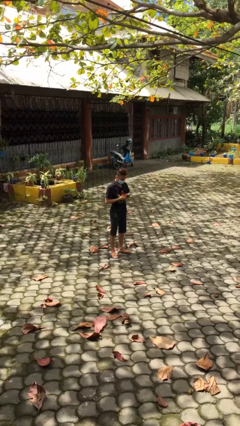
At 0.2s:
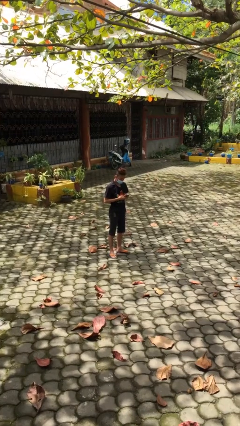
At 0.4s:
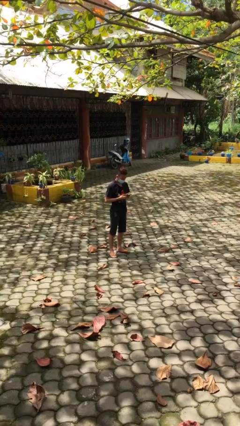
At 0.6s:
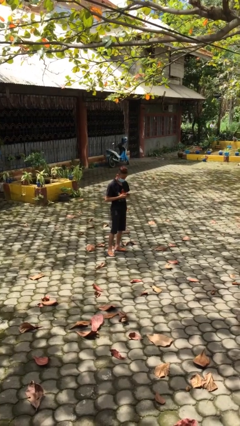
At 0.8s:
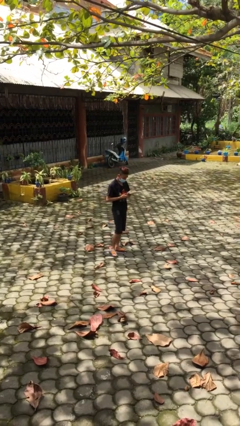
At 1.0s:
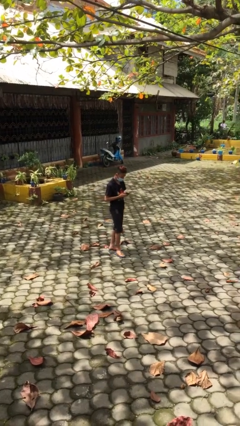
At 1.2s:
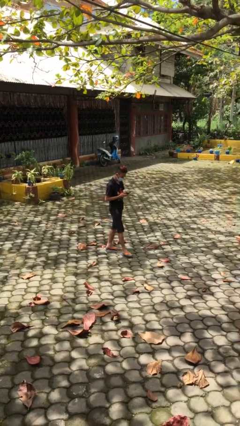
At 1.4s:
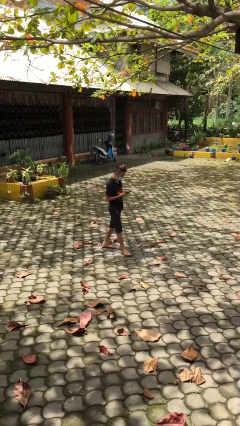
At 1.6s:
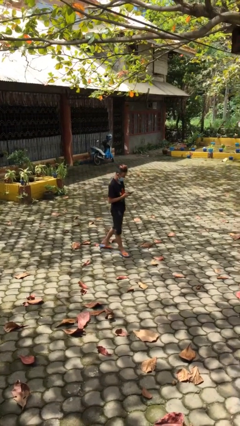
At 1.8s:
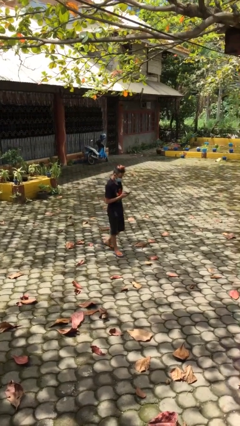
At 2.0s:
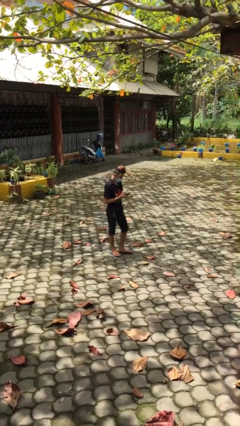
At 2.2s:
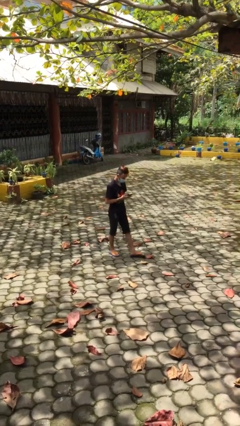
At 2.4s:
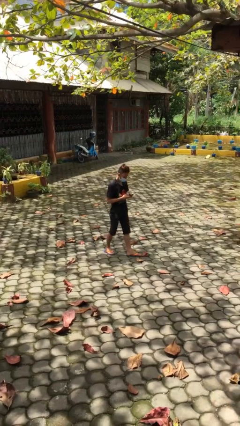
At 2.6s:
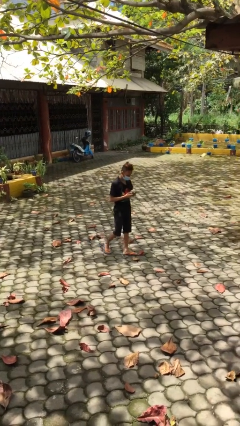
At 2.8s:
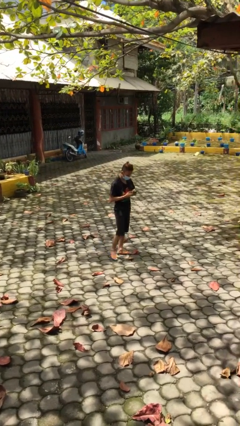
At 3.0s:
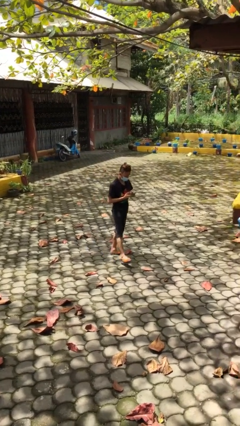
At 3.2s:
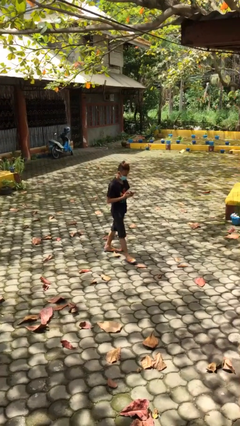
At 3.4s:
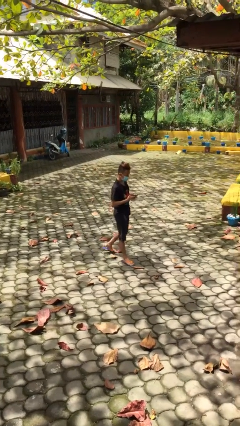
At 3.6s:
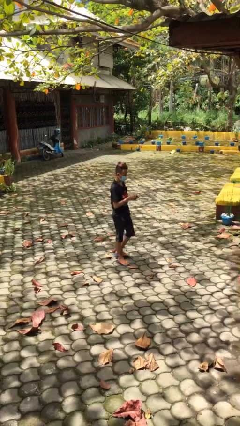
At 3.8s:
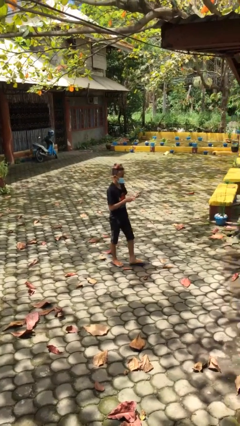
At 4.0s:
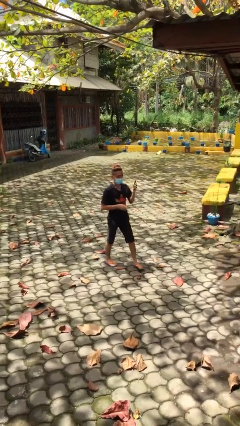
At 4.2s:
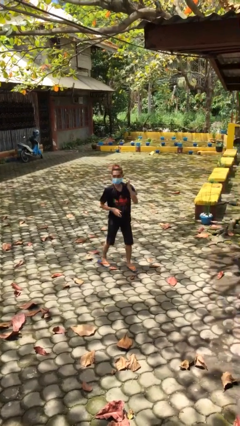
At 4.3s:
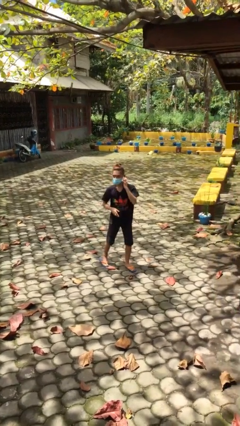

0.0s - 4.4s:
person texts on phone

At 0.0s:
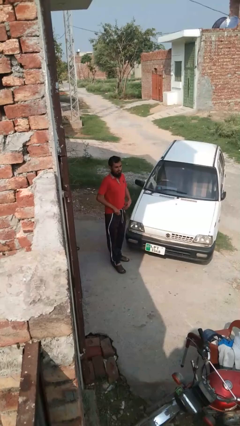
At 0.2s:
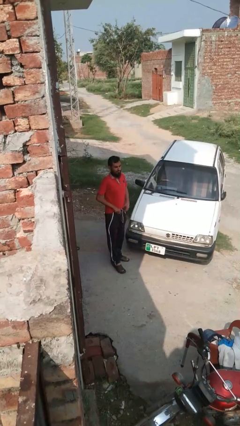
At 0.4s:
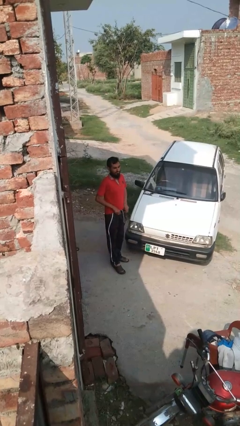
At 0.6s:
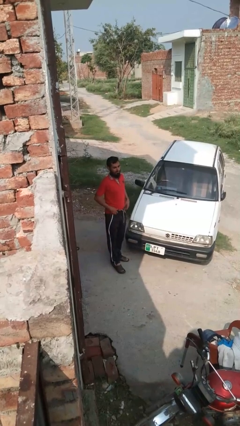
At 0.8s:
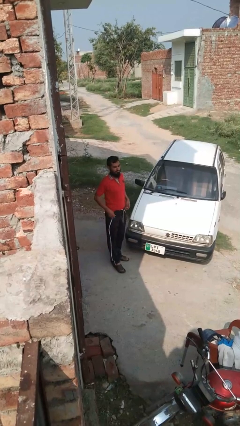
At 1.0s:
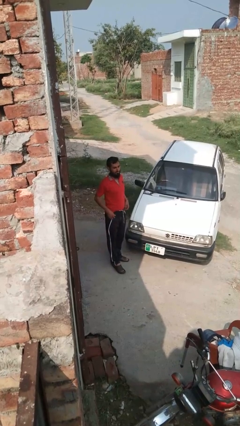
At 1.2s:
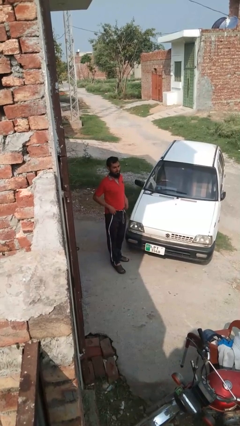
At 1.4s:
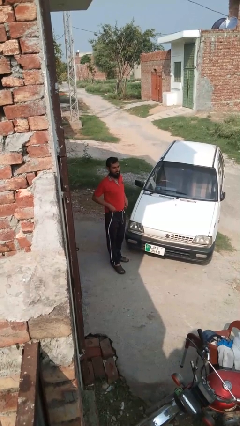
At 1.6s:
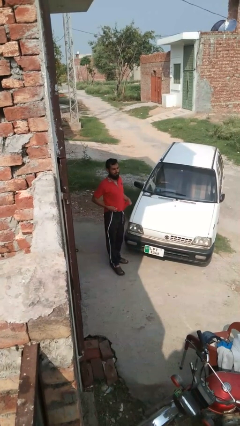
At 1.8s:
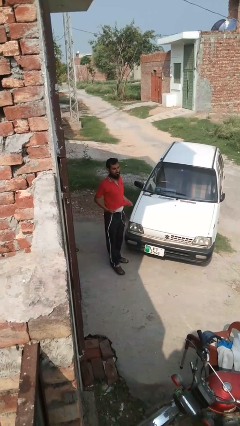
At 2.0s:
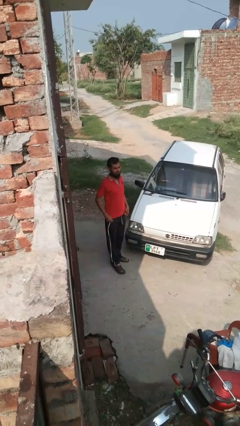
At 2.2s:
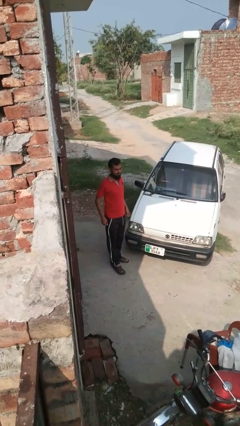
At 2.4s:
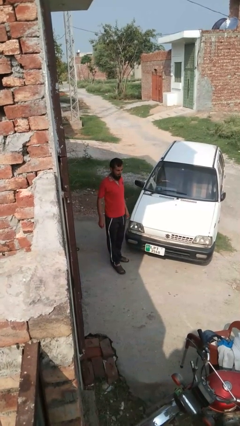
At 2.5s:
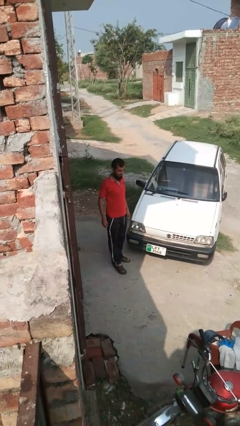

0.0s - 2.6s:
person untucks shirt

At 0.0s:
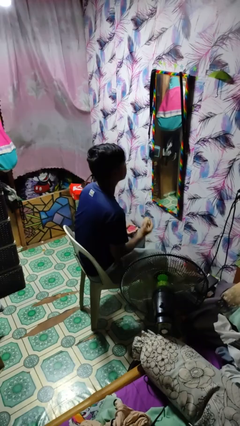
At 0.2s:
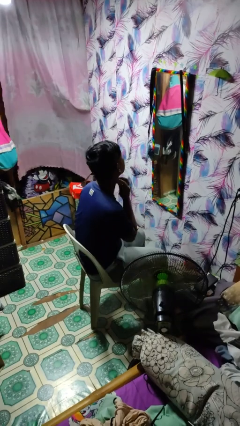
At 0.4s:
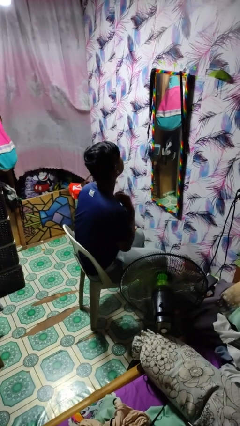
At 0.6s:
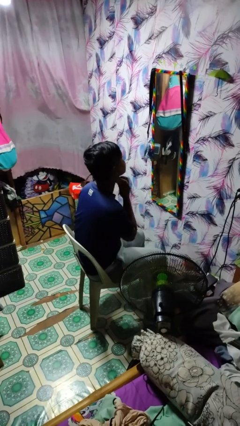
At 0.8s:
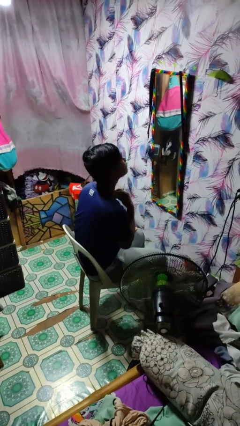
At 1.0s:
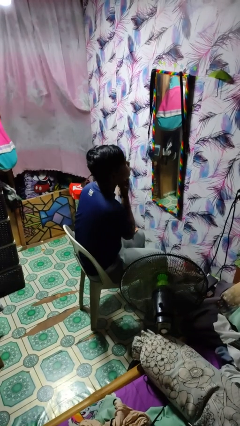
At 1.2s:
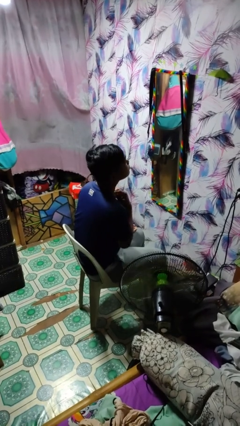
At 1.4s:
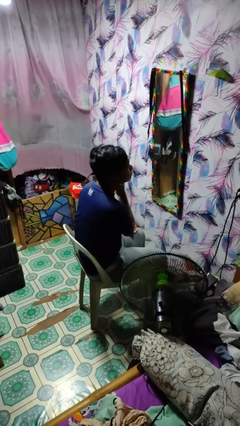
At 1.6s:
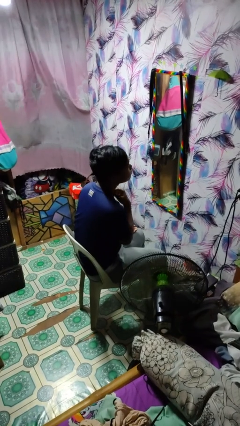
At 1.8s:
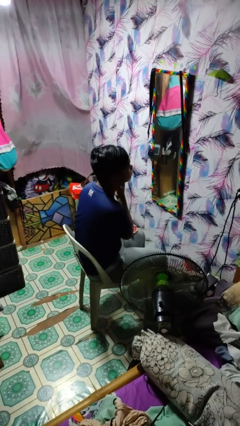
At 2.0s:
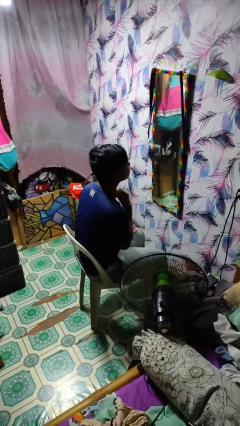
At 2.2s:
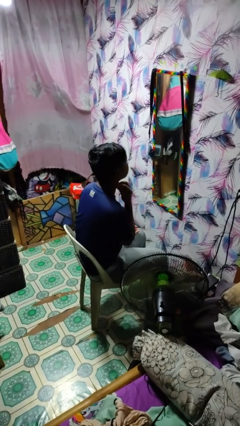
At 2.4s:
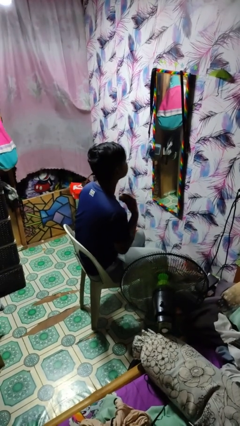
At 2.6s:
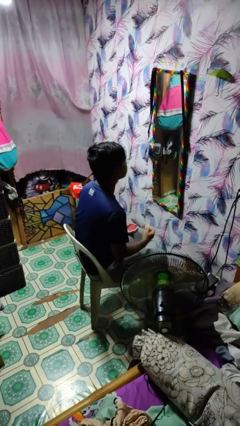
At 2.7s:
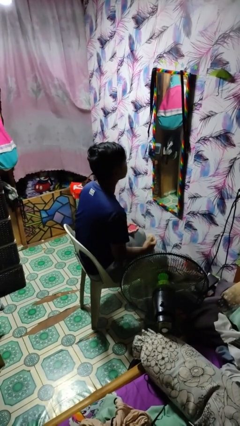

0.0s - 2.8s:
person applies foundation makeup

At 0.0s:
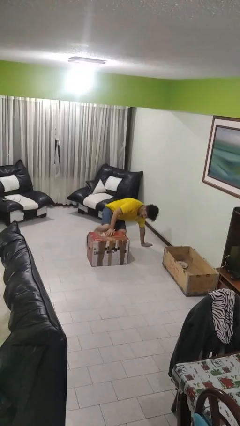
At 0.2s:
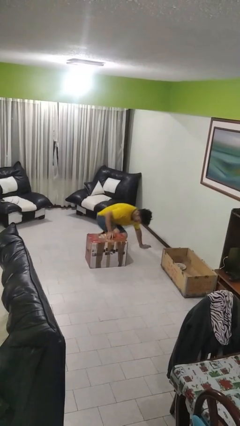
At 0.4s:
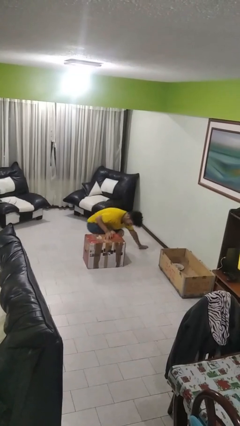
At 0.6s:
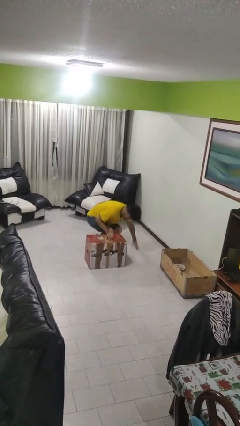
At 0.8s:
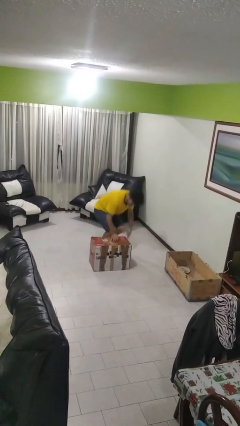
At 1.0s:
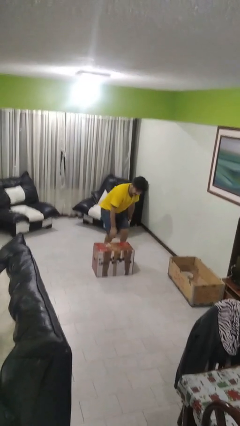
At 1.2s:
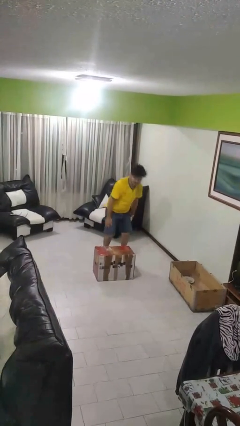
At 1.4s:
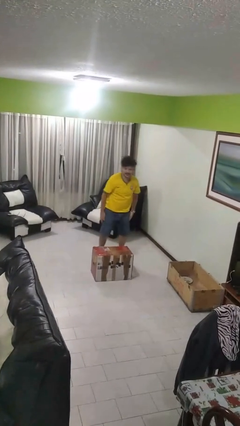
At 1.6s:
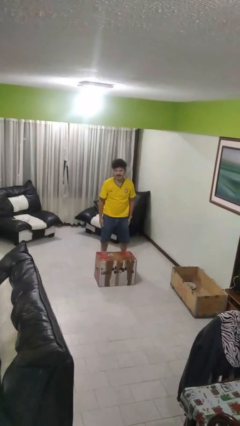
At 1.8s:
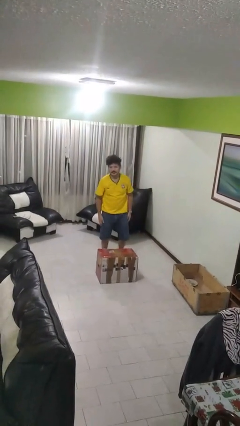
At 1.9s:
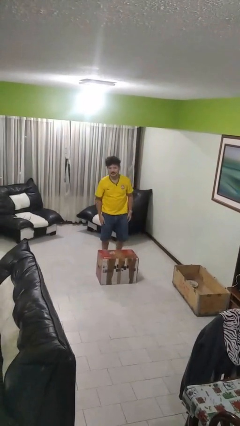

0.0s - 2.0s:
person stands up from floor

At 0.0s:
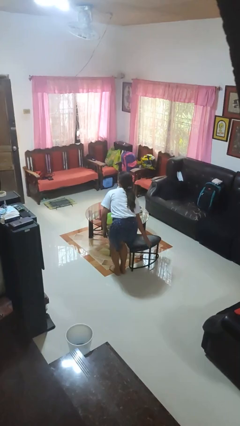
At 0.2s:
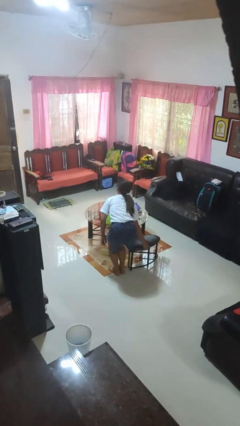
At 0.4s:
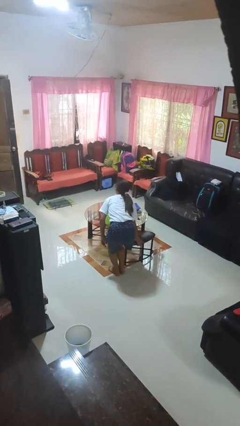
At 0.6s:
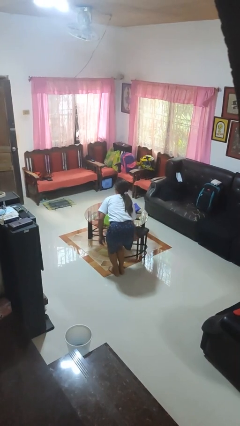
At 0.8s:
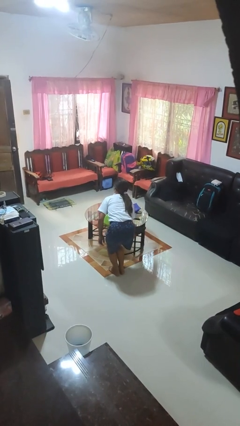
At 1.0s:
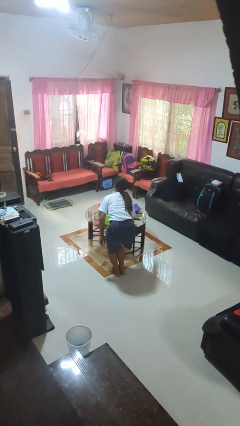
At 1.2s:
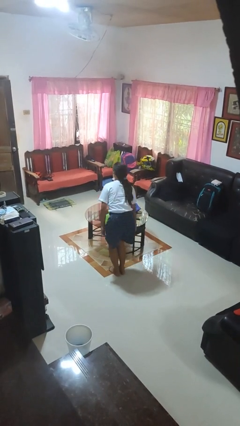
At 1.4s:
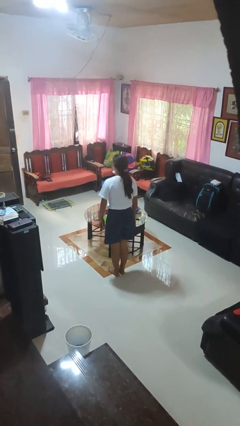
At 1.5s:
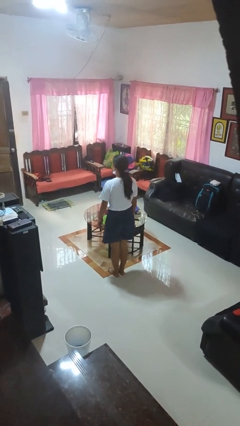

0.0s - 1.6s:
person pushes in chair

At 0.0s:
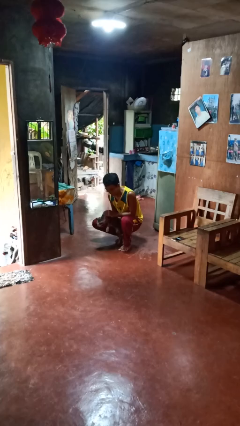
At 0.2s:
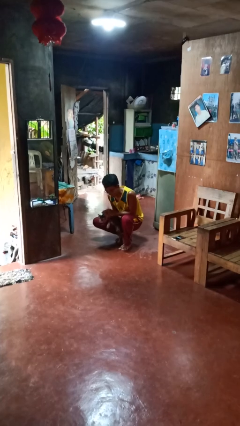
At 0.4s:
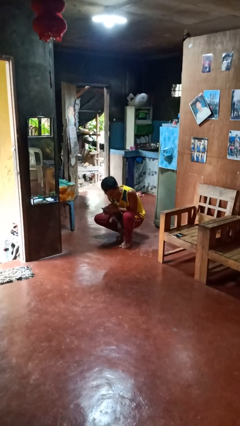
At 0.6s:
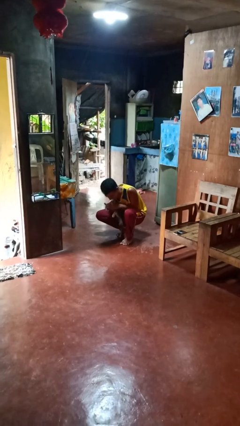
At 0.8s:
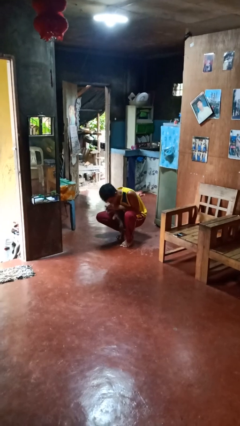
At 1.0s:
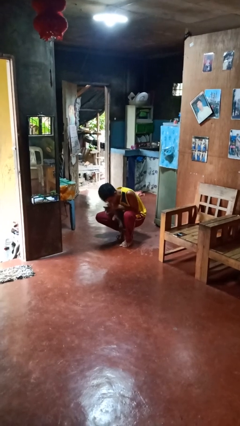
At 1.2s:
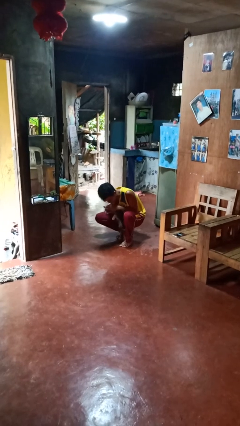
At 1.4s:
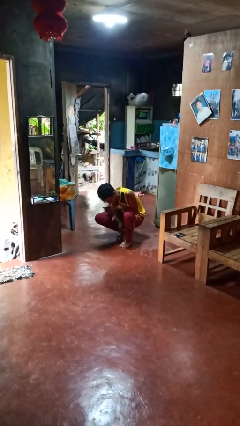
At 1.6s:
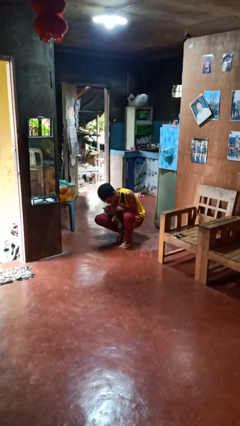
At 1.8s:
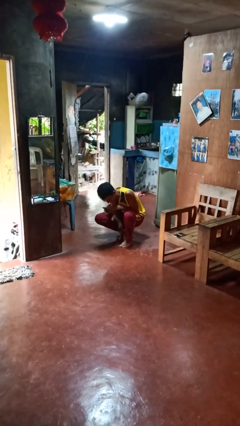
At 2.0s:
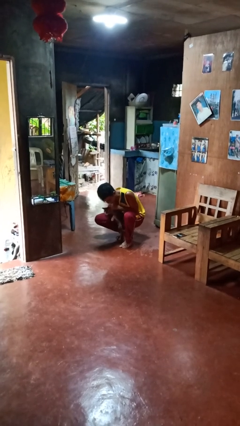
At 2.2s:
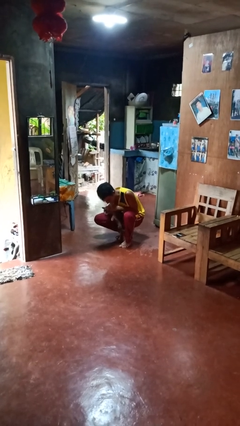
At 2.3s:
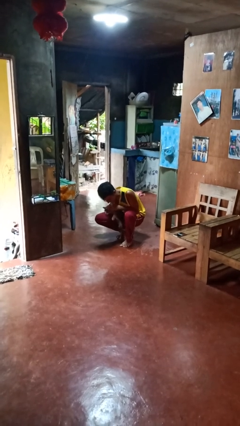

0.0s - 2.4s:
person hugs cat

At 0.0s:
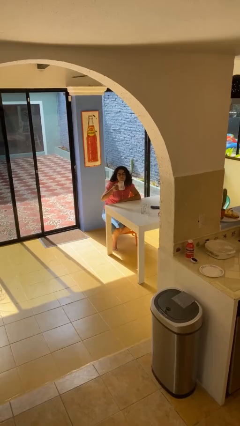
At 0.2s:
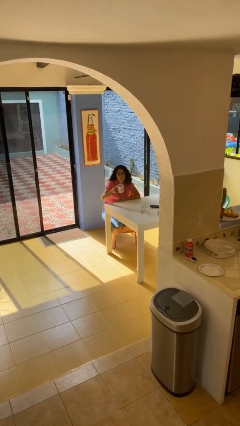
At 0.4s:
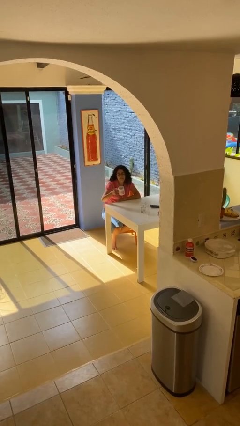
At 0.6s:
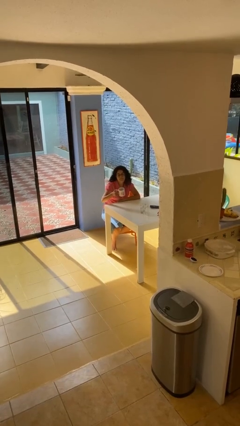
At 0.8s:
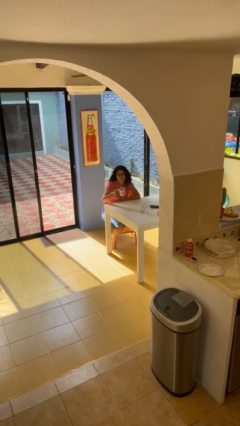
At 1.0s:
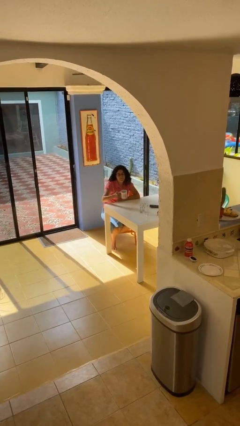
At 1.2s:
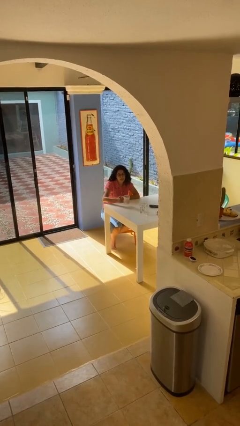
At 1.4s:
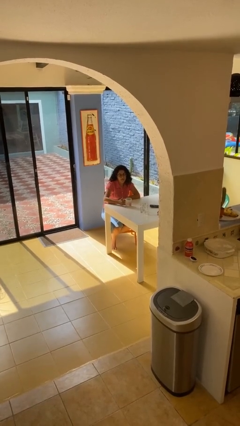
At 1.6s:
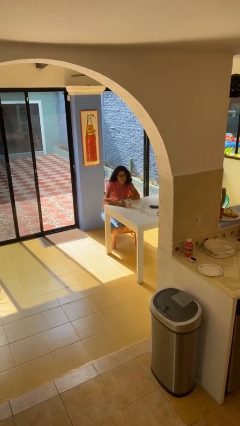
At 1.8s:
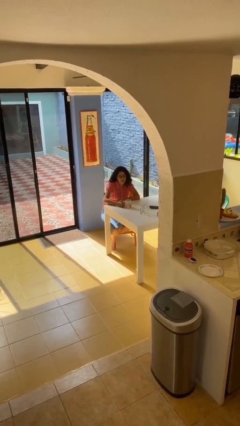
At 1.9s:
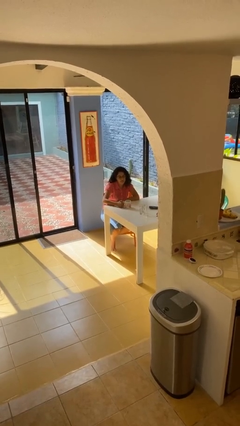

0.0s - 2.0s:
person puts down object on table
